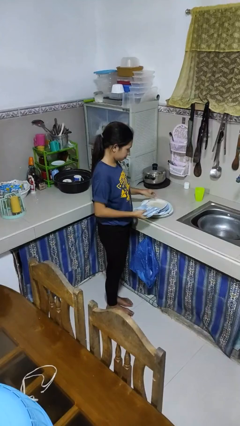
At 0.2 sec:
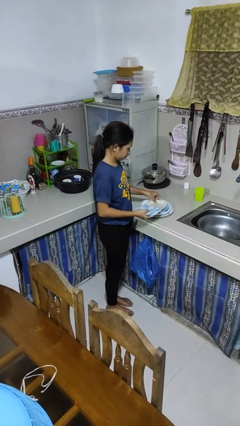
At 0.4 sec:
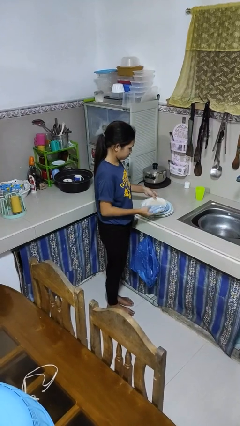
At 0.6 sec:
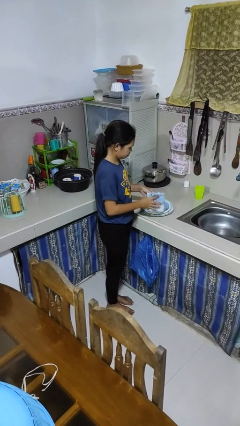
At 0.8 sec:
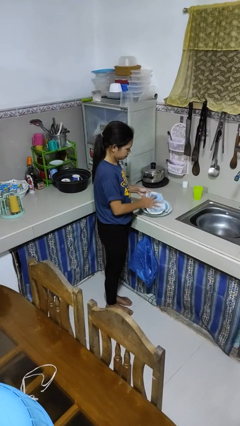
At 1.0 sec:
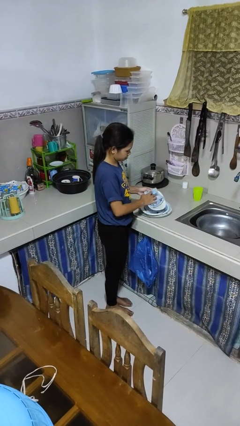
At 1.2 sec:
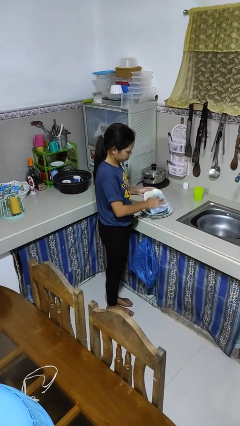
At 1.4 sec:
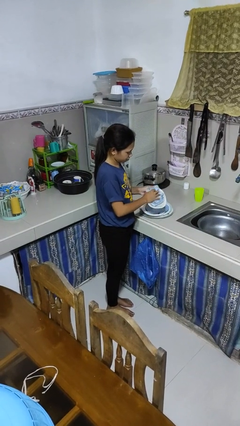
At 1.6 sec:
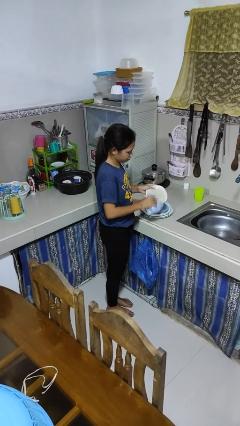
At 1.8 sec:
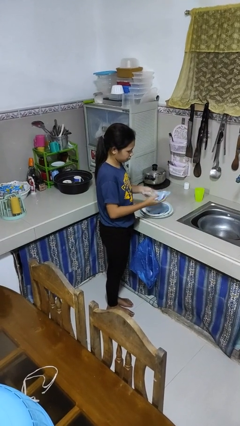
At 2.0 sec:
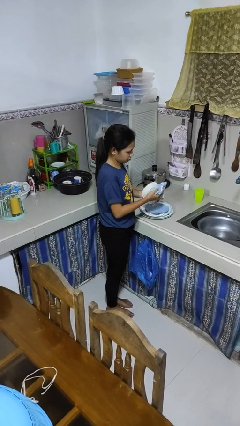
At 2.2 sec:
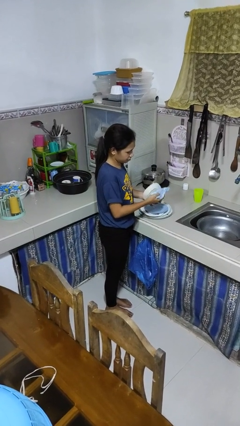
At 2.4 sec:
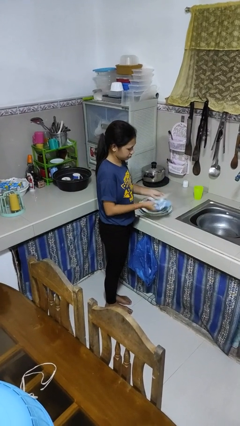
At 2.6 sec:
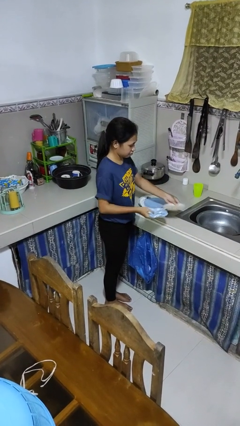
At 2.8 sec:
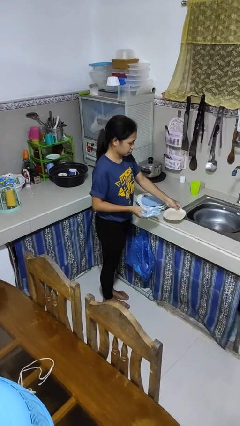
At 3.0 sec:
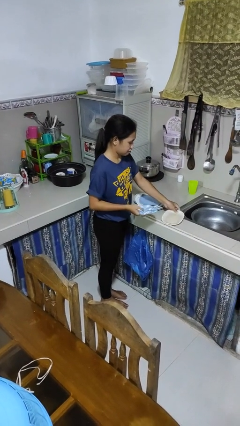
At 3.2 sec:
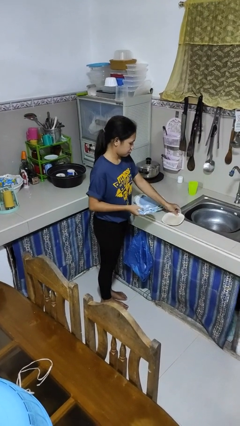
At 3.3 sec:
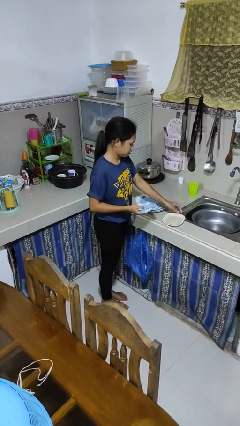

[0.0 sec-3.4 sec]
person dries dish

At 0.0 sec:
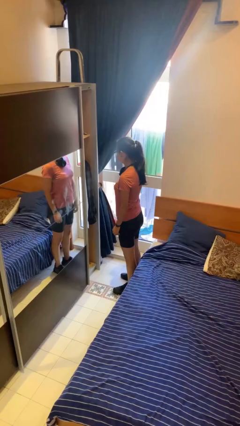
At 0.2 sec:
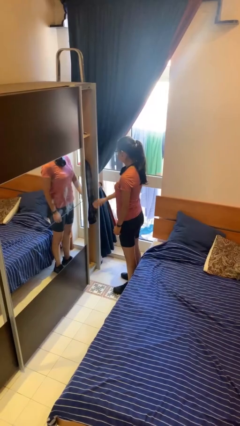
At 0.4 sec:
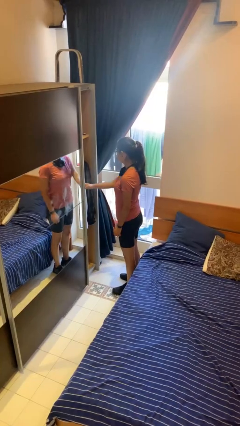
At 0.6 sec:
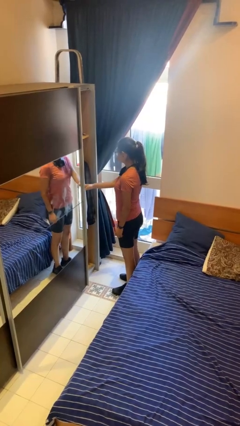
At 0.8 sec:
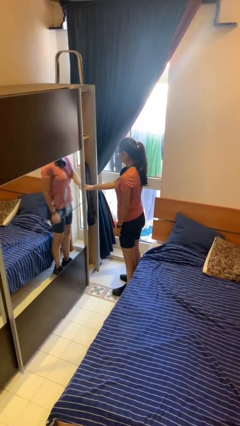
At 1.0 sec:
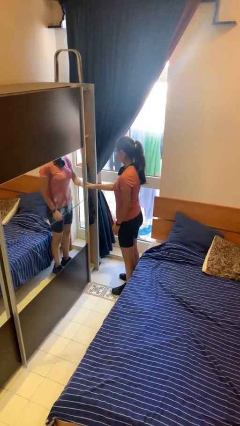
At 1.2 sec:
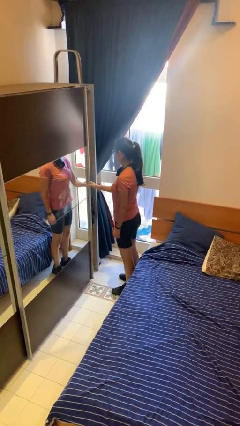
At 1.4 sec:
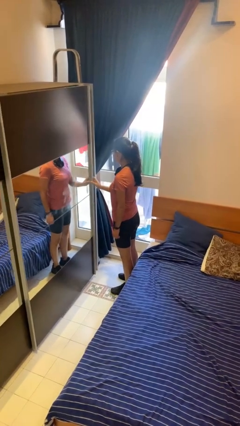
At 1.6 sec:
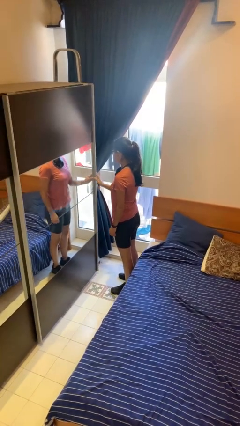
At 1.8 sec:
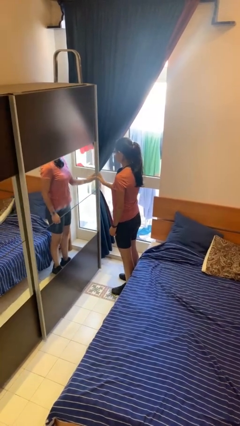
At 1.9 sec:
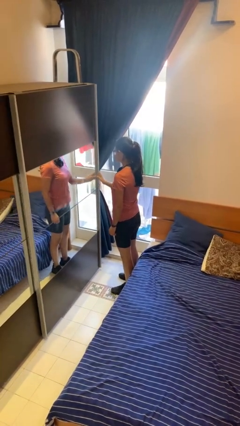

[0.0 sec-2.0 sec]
person closes closet door

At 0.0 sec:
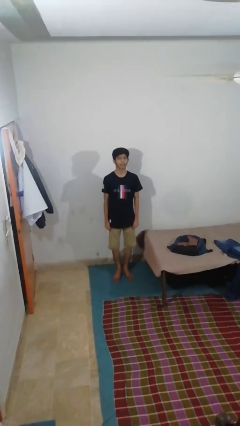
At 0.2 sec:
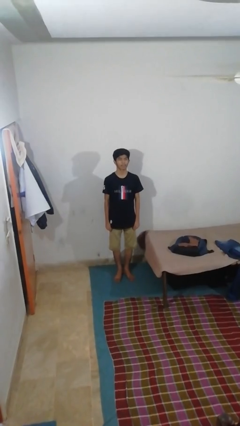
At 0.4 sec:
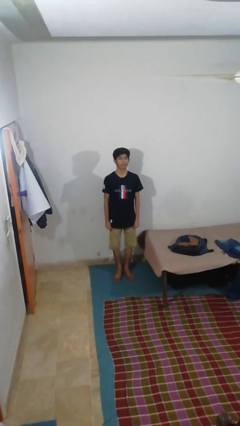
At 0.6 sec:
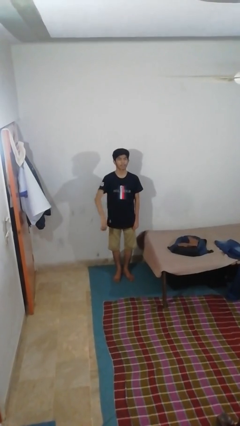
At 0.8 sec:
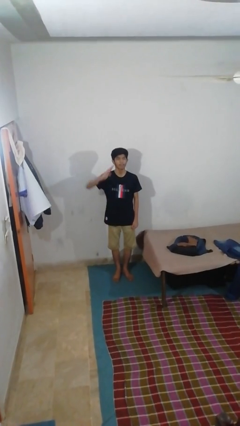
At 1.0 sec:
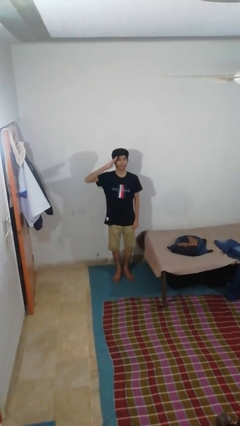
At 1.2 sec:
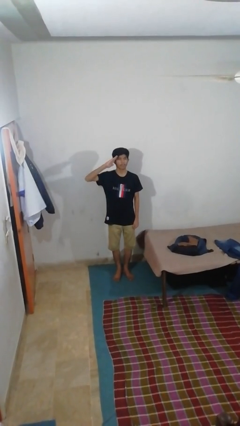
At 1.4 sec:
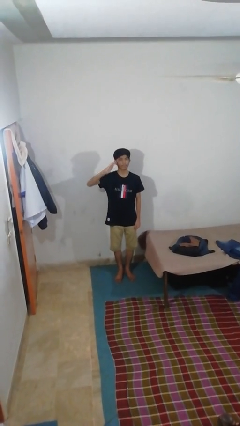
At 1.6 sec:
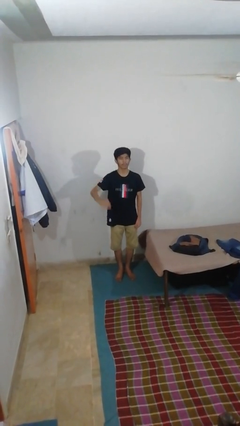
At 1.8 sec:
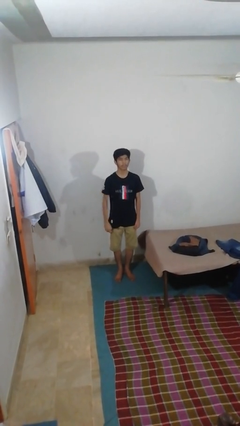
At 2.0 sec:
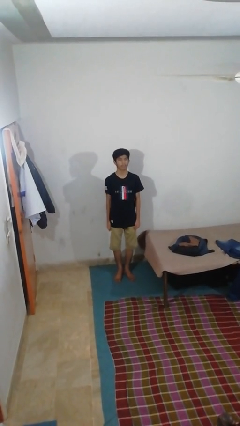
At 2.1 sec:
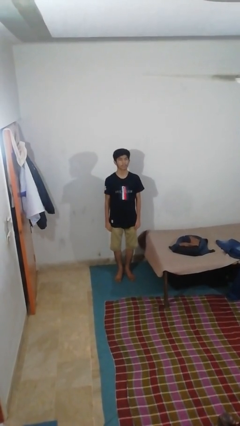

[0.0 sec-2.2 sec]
person salutes

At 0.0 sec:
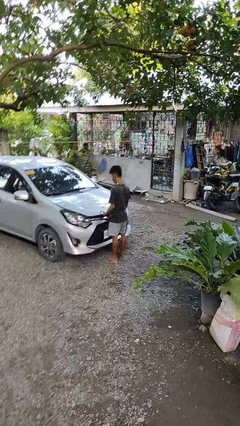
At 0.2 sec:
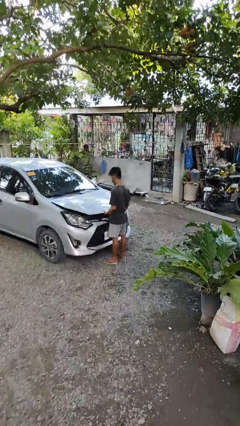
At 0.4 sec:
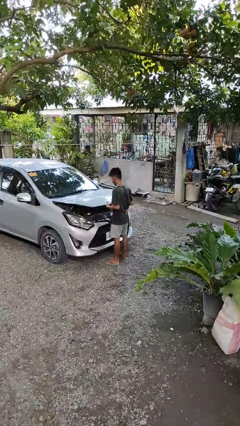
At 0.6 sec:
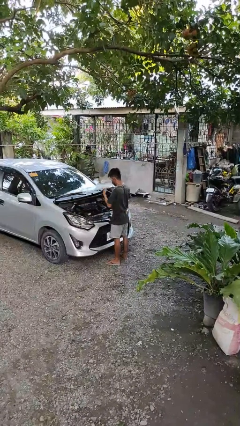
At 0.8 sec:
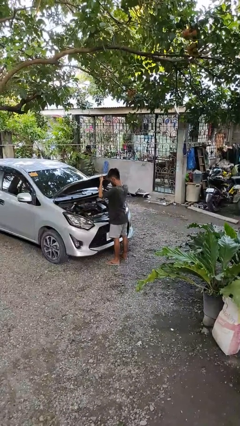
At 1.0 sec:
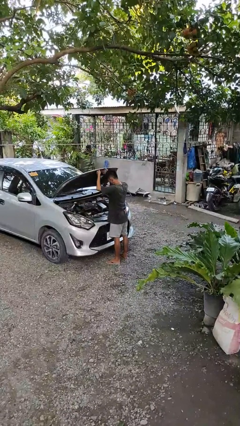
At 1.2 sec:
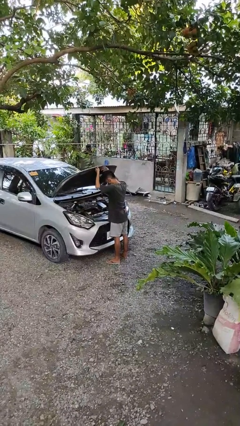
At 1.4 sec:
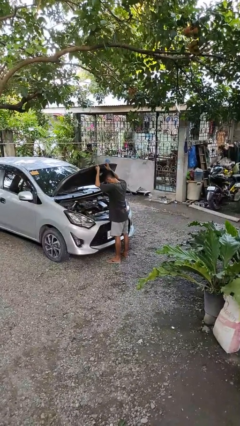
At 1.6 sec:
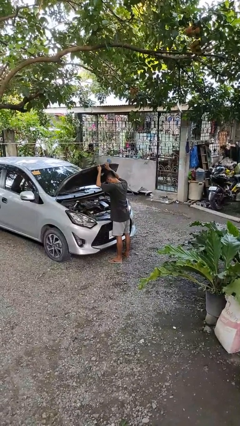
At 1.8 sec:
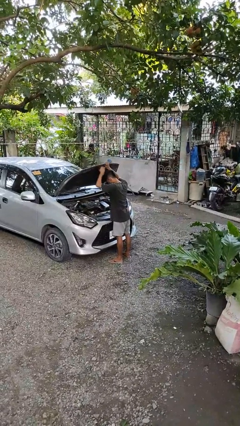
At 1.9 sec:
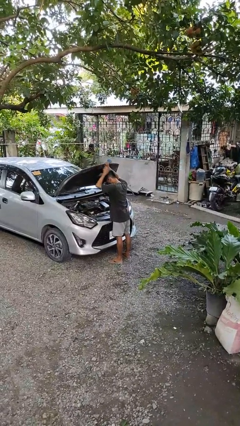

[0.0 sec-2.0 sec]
person opens car hood

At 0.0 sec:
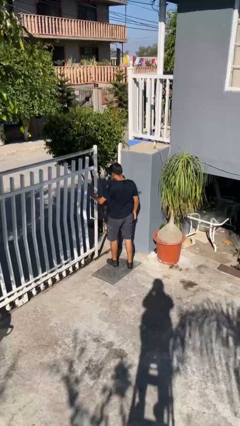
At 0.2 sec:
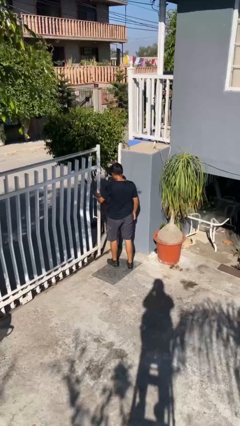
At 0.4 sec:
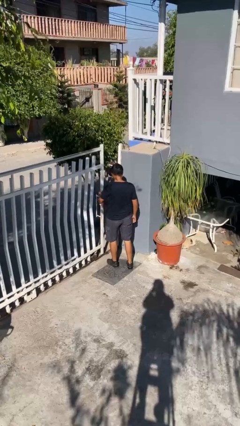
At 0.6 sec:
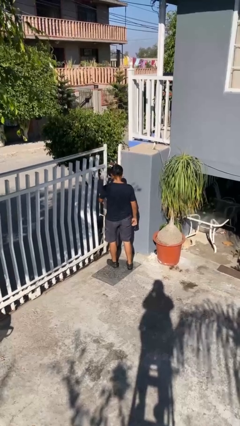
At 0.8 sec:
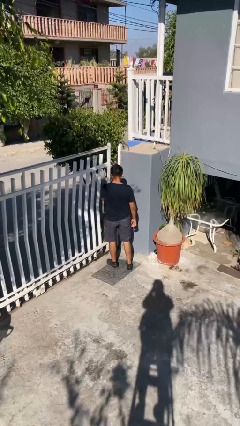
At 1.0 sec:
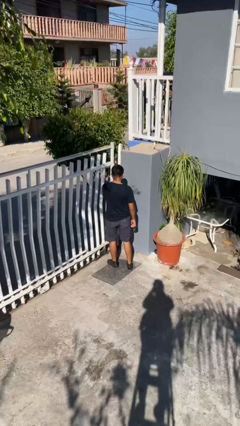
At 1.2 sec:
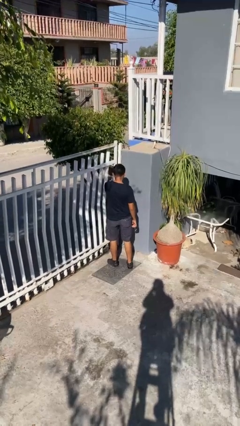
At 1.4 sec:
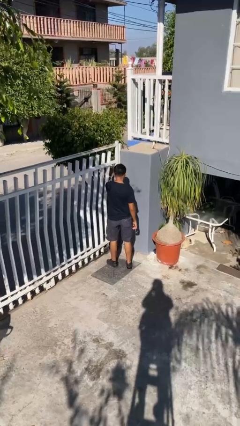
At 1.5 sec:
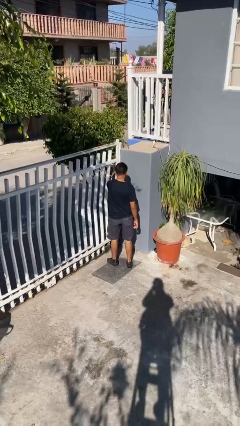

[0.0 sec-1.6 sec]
person closes facility door

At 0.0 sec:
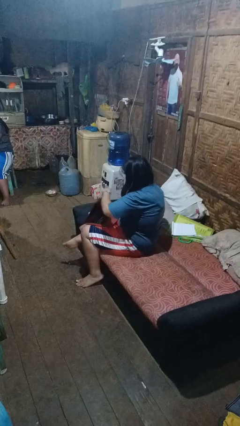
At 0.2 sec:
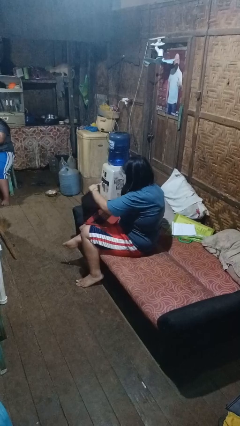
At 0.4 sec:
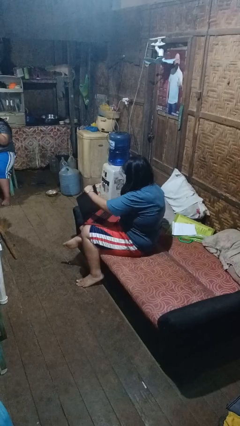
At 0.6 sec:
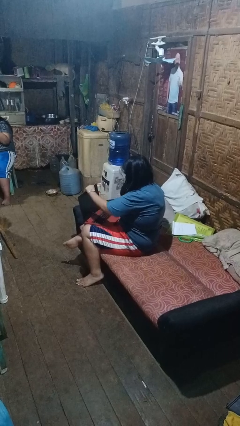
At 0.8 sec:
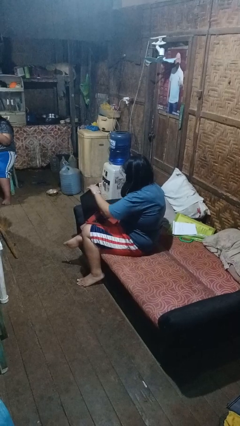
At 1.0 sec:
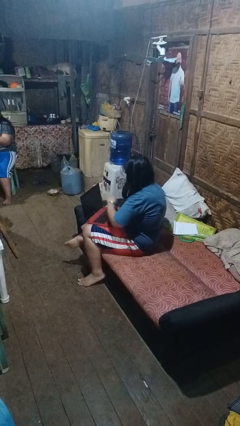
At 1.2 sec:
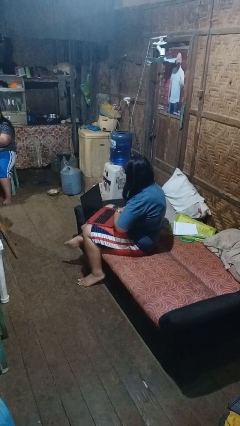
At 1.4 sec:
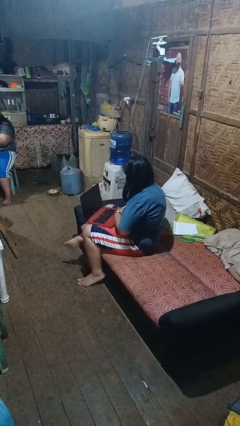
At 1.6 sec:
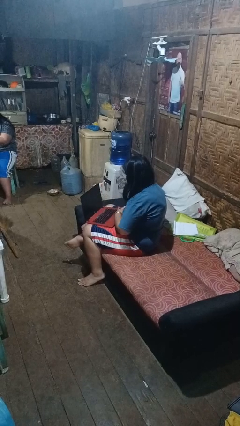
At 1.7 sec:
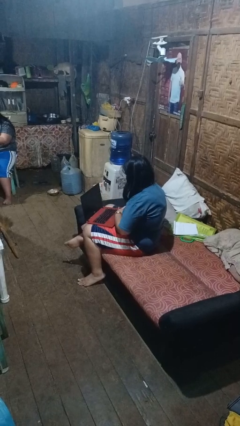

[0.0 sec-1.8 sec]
person opens laptop

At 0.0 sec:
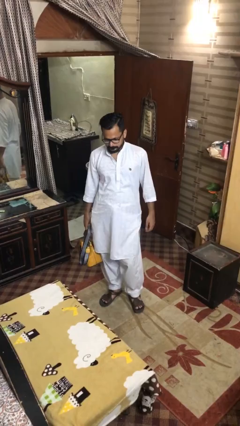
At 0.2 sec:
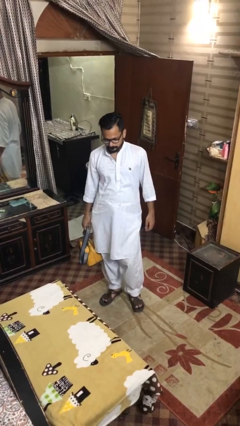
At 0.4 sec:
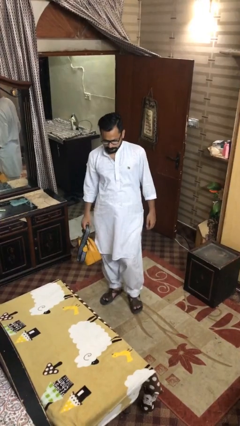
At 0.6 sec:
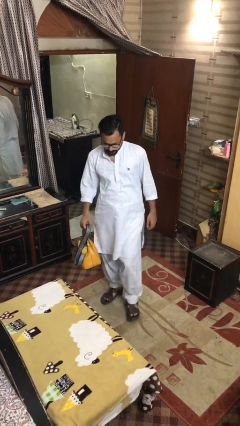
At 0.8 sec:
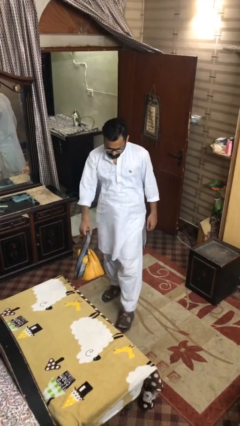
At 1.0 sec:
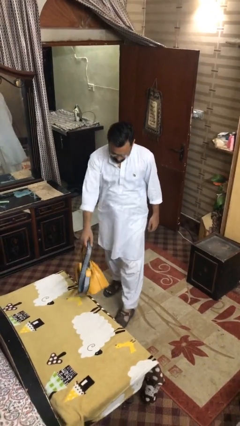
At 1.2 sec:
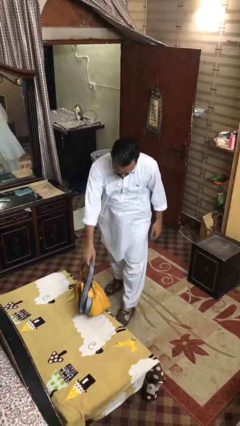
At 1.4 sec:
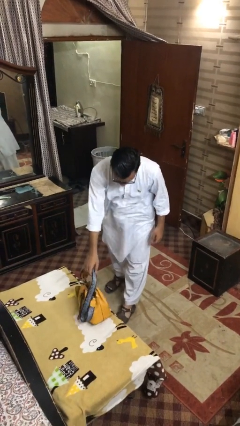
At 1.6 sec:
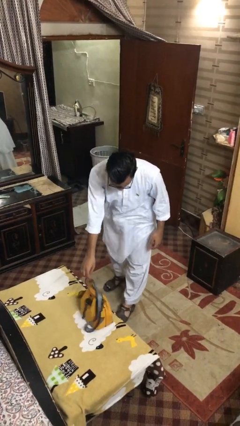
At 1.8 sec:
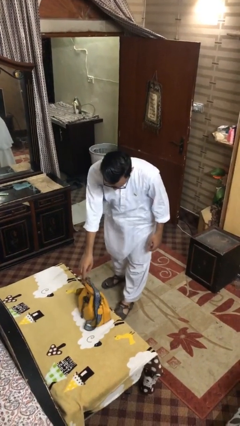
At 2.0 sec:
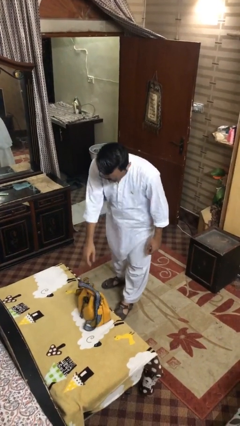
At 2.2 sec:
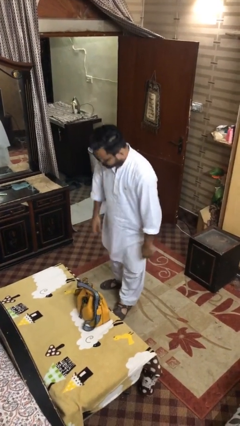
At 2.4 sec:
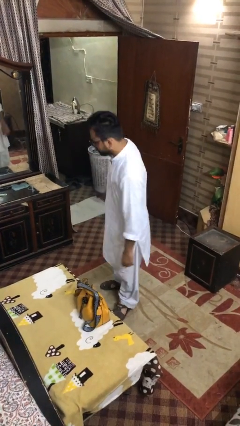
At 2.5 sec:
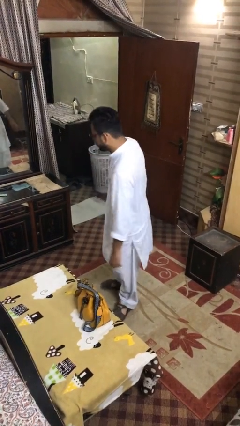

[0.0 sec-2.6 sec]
person puts down object on table

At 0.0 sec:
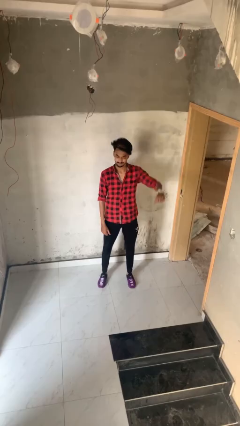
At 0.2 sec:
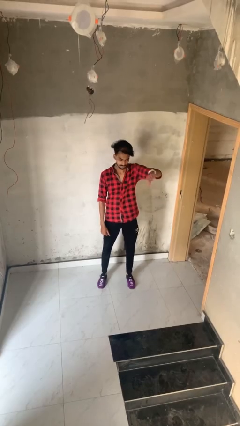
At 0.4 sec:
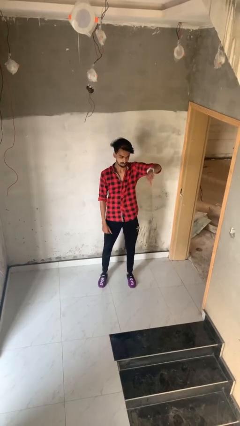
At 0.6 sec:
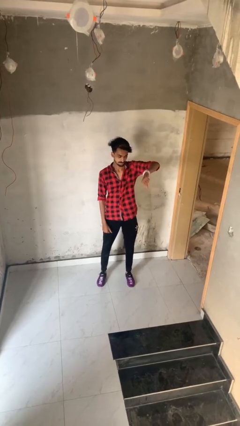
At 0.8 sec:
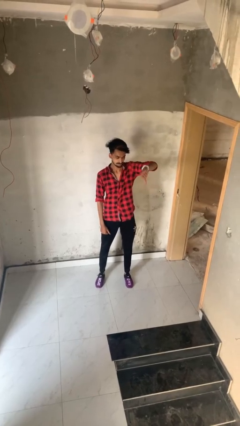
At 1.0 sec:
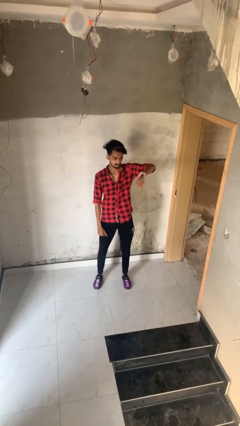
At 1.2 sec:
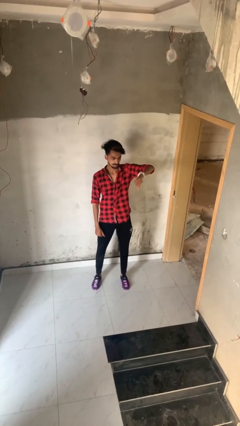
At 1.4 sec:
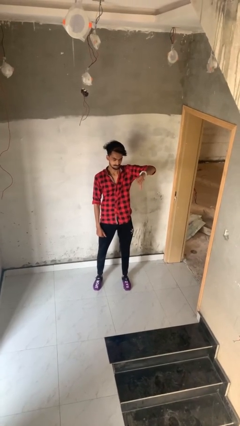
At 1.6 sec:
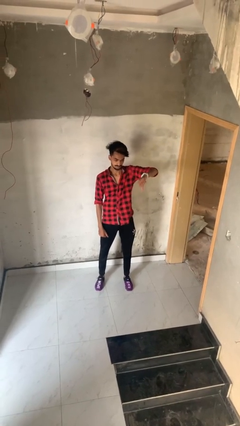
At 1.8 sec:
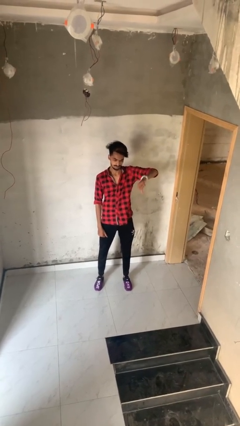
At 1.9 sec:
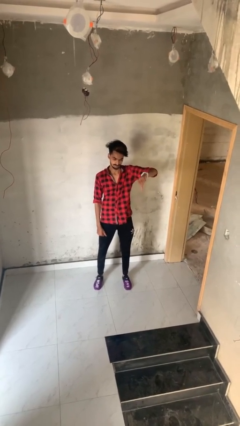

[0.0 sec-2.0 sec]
person gestures thumbs down
